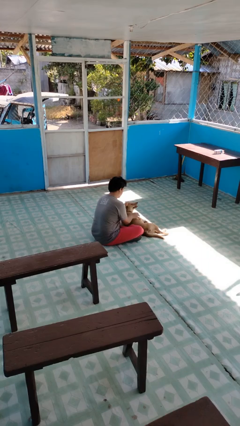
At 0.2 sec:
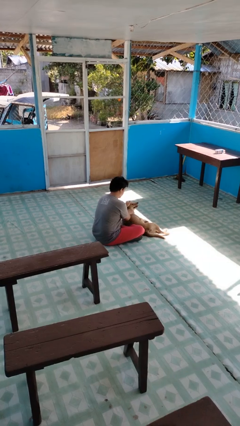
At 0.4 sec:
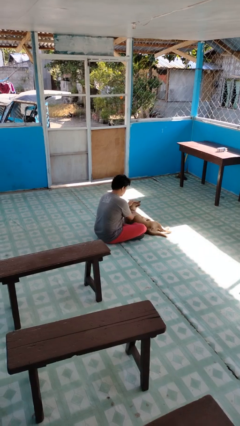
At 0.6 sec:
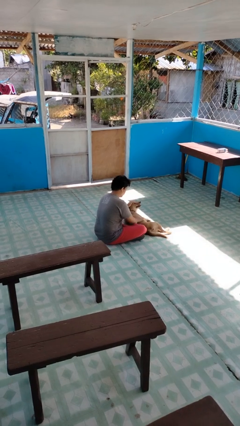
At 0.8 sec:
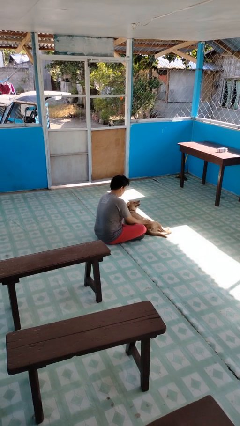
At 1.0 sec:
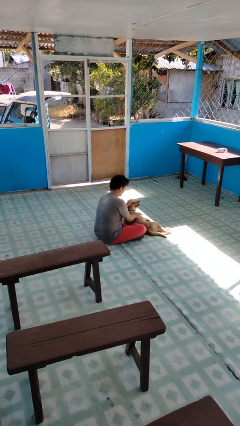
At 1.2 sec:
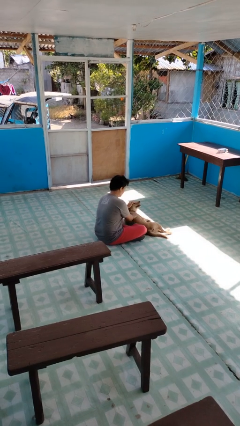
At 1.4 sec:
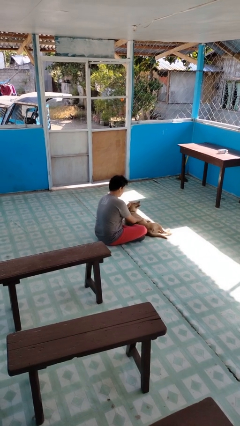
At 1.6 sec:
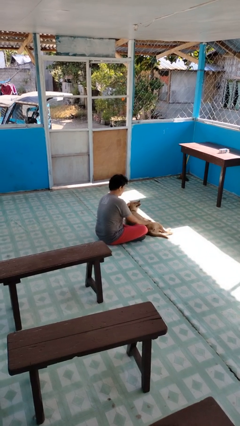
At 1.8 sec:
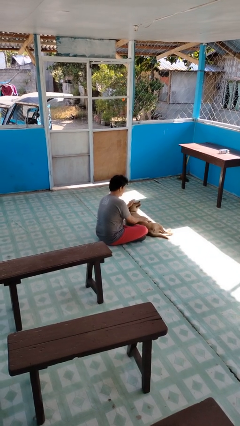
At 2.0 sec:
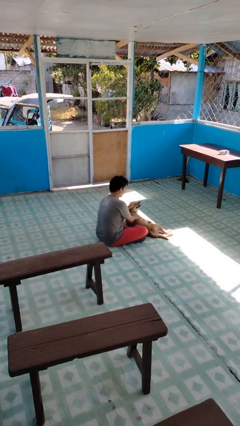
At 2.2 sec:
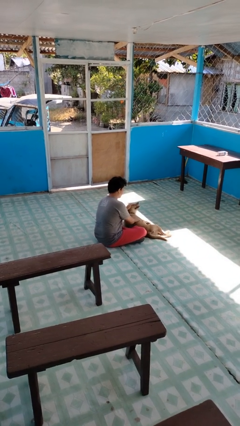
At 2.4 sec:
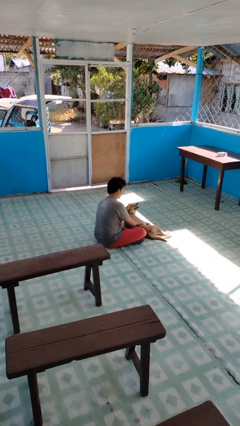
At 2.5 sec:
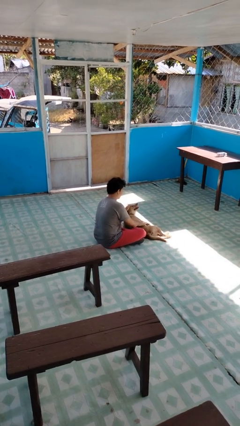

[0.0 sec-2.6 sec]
person pets dog

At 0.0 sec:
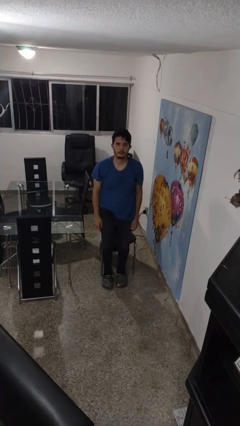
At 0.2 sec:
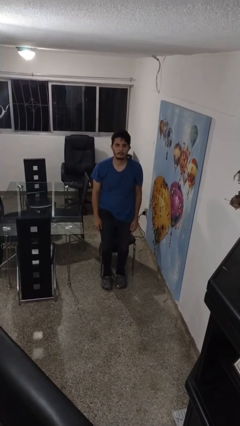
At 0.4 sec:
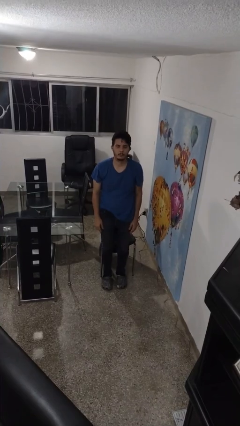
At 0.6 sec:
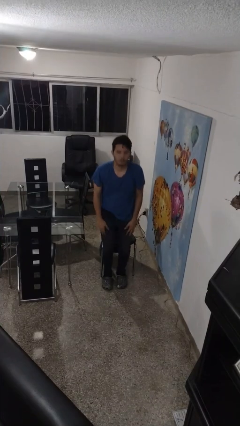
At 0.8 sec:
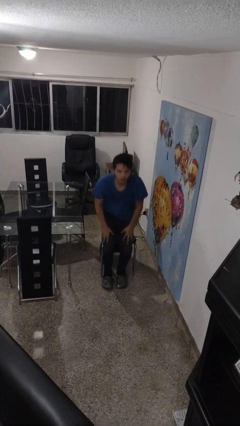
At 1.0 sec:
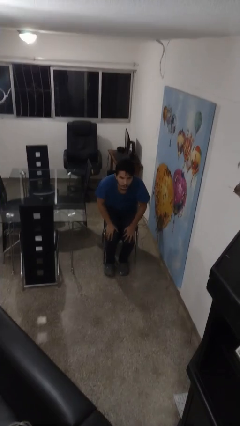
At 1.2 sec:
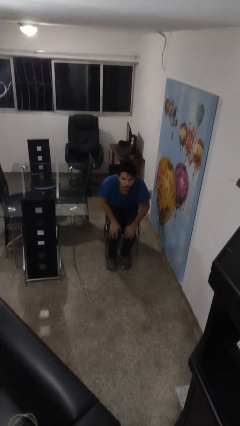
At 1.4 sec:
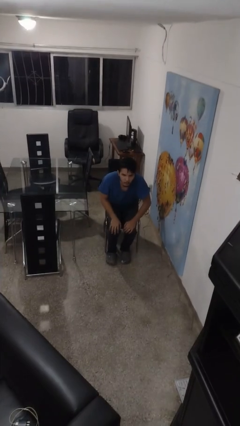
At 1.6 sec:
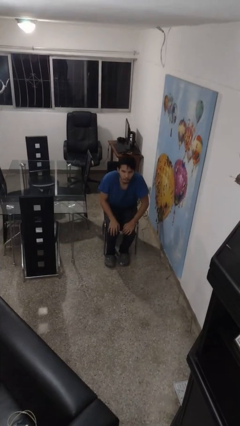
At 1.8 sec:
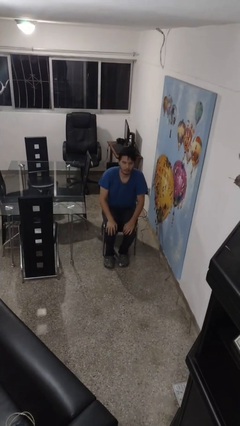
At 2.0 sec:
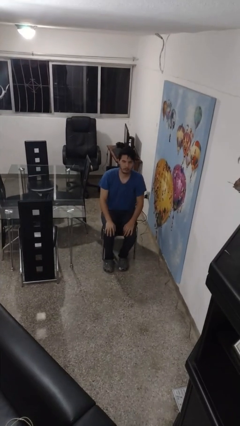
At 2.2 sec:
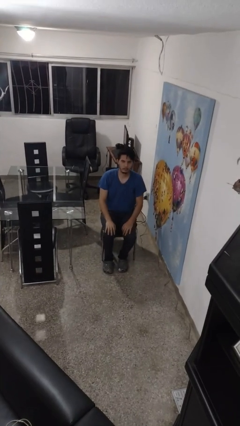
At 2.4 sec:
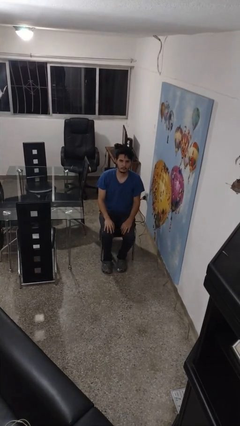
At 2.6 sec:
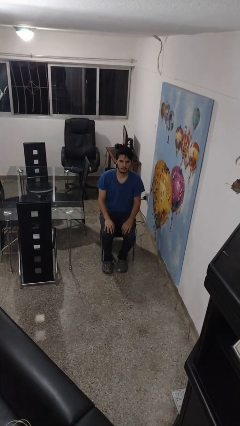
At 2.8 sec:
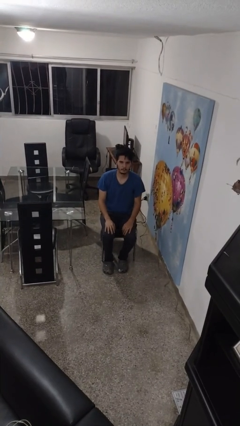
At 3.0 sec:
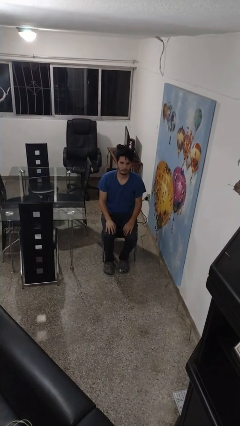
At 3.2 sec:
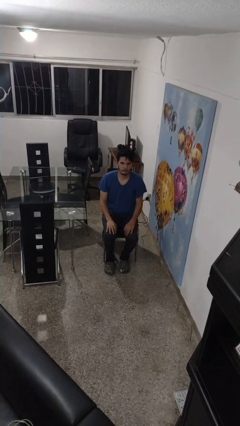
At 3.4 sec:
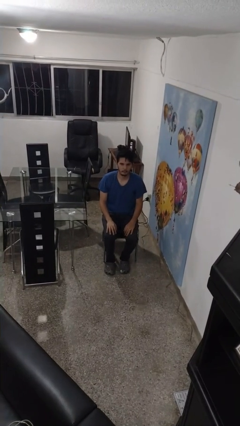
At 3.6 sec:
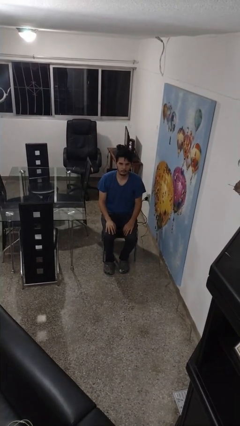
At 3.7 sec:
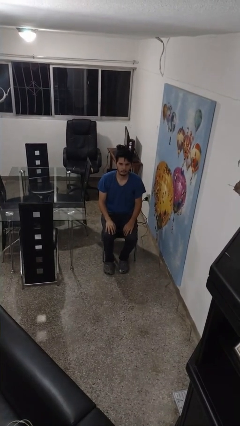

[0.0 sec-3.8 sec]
person sits down

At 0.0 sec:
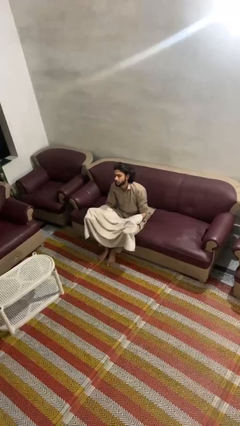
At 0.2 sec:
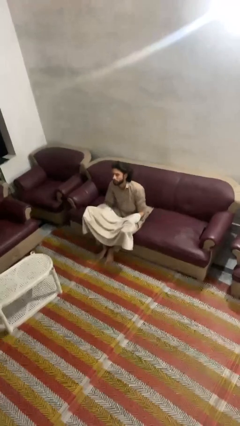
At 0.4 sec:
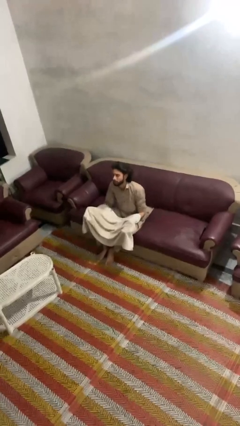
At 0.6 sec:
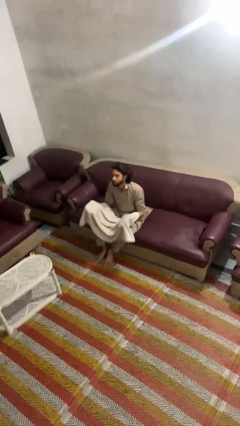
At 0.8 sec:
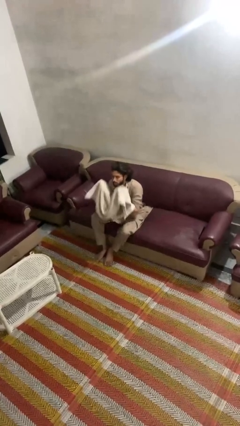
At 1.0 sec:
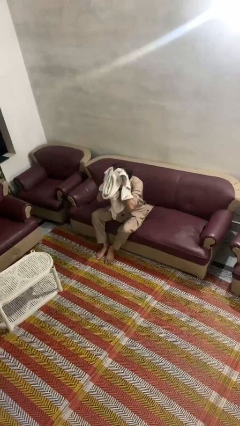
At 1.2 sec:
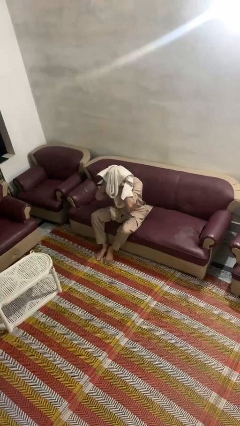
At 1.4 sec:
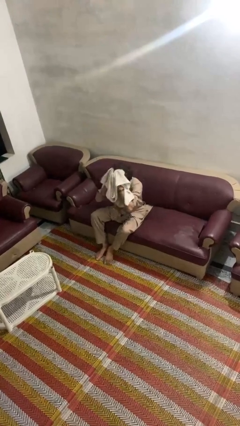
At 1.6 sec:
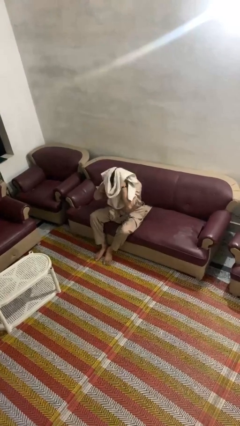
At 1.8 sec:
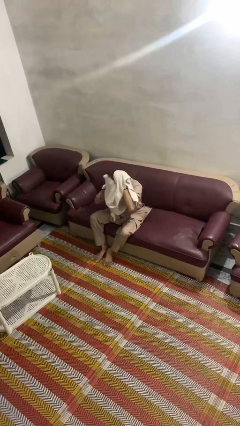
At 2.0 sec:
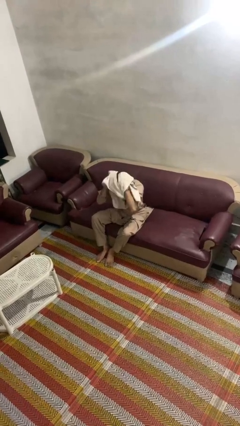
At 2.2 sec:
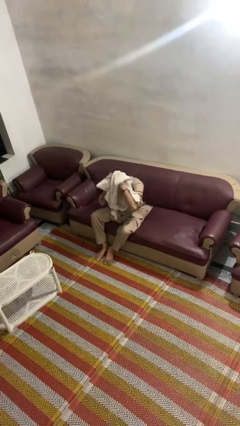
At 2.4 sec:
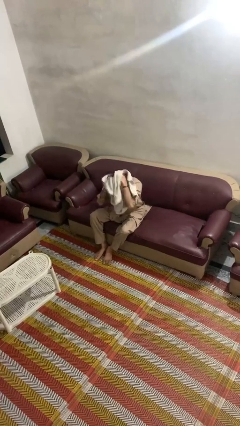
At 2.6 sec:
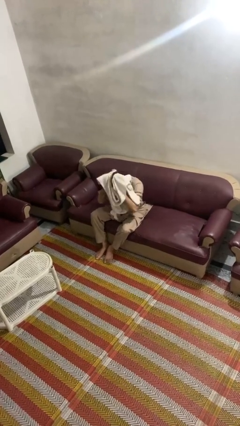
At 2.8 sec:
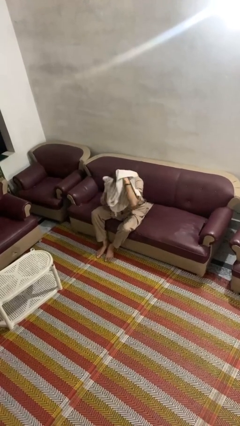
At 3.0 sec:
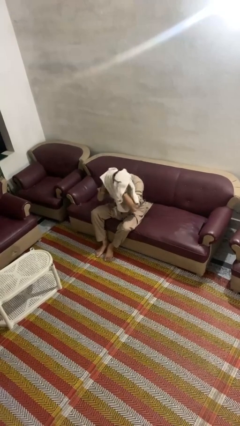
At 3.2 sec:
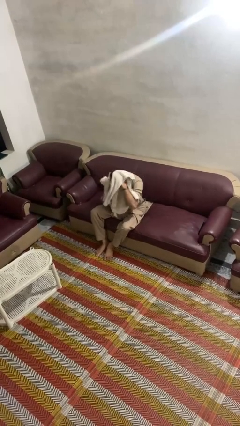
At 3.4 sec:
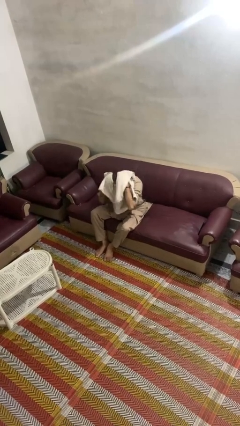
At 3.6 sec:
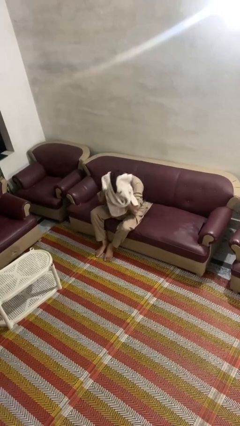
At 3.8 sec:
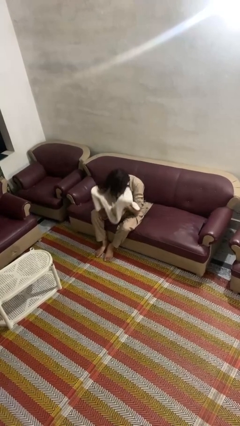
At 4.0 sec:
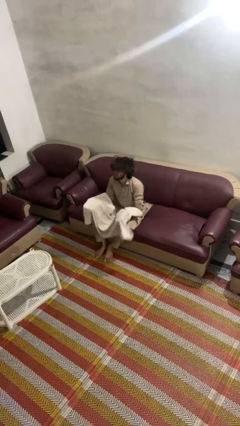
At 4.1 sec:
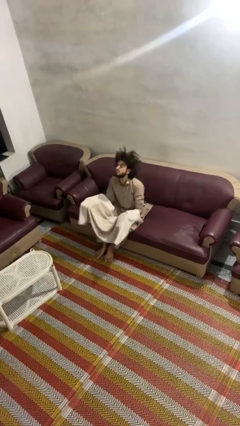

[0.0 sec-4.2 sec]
person dries hair with towel

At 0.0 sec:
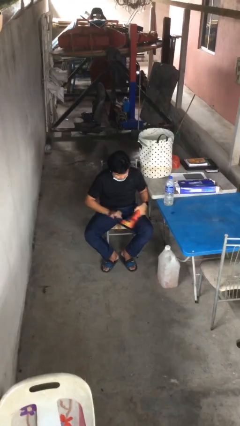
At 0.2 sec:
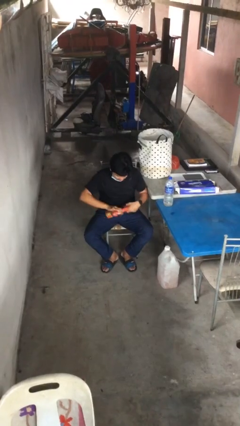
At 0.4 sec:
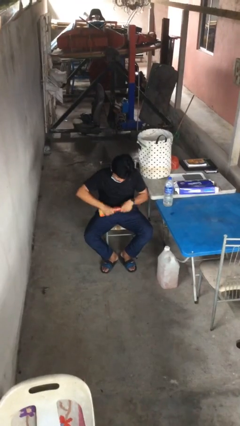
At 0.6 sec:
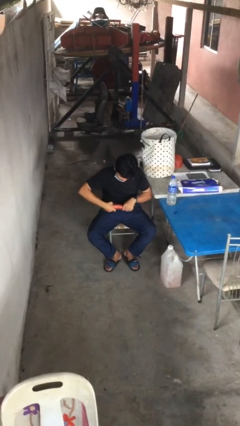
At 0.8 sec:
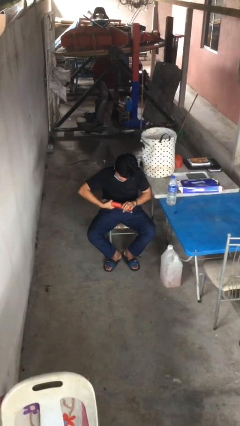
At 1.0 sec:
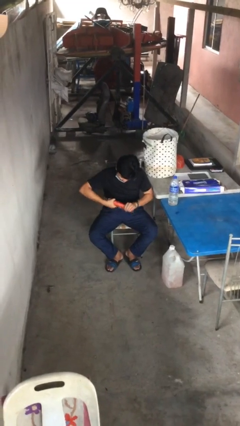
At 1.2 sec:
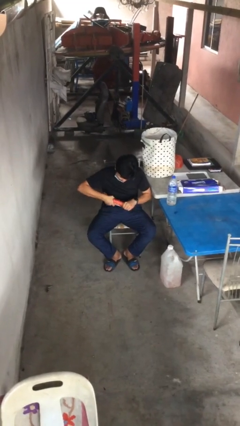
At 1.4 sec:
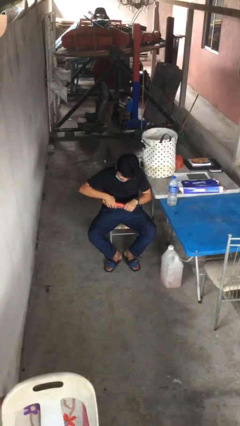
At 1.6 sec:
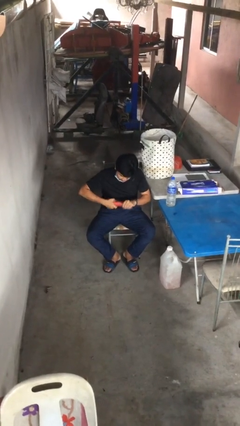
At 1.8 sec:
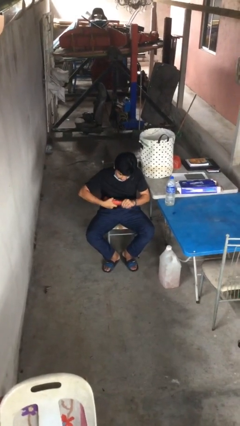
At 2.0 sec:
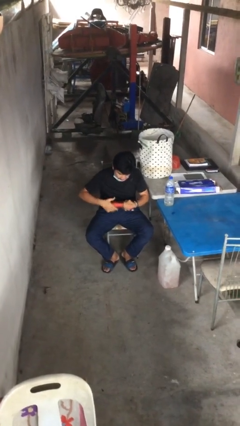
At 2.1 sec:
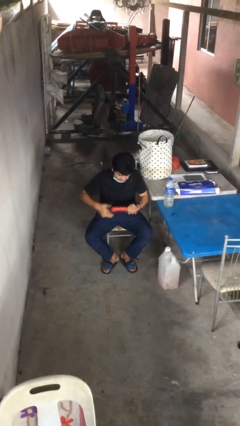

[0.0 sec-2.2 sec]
person squeezes object

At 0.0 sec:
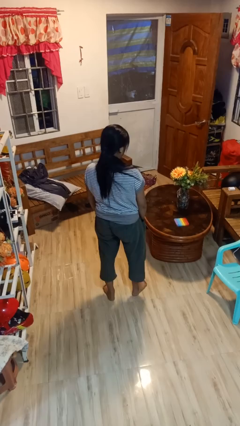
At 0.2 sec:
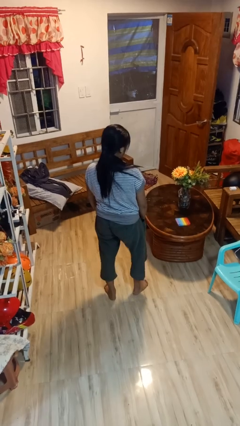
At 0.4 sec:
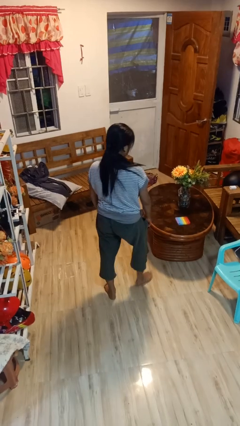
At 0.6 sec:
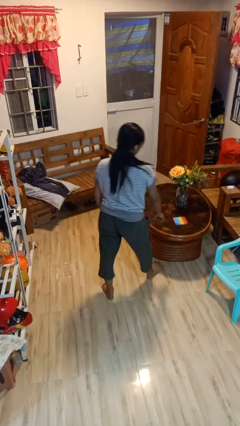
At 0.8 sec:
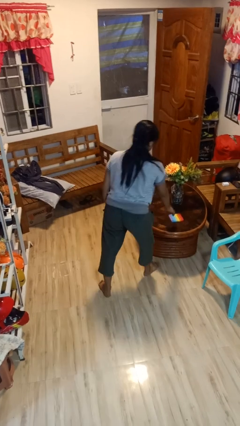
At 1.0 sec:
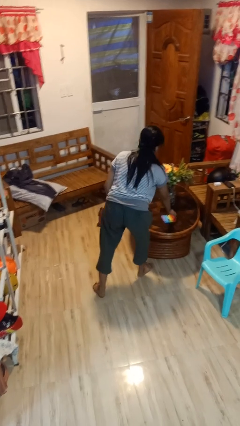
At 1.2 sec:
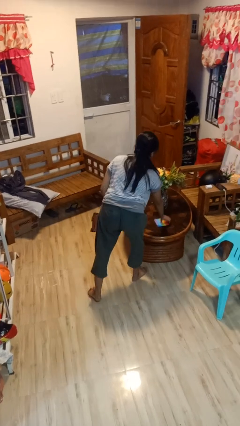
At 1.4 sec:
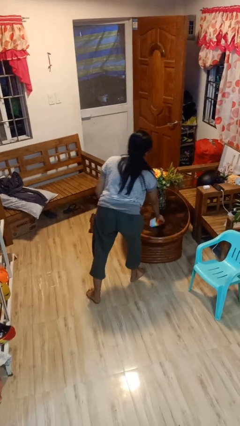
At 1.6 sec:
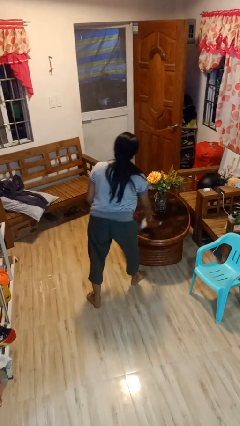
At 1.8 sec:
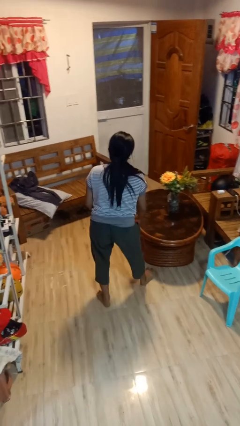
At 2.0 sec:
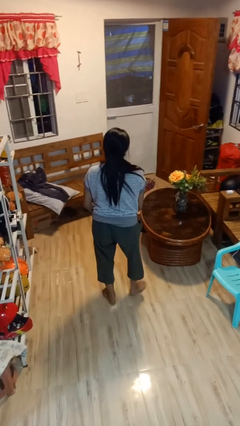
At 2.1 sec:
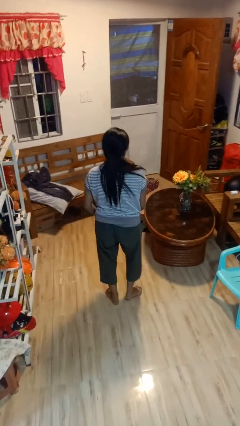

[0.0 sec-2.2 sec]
person picks up object from table

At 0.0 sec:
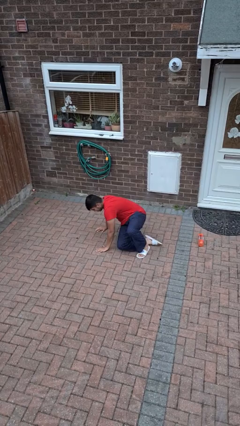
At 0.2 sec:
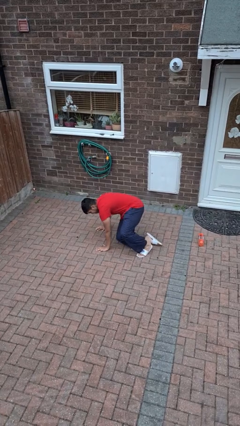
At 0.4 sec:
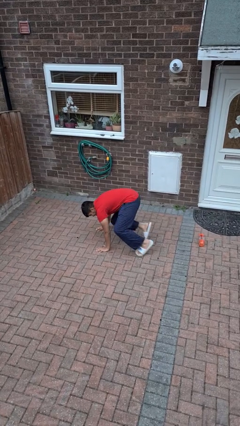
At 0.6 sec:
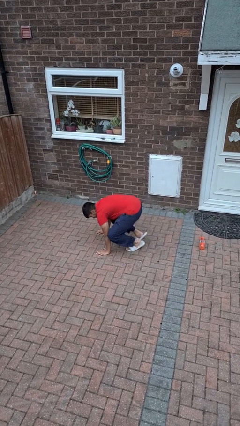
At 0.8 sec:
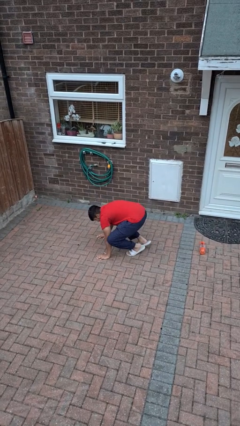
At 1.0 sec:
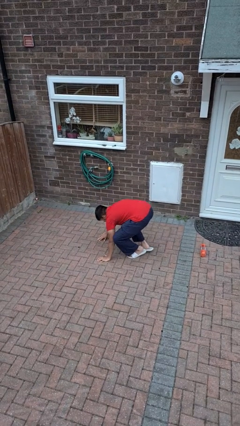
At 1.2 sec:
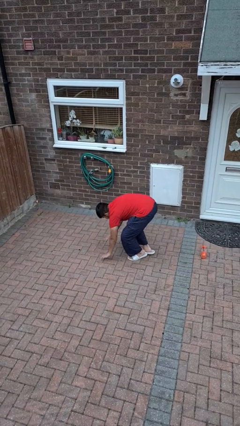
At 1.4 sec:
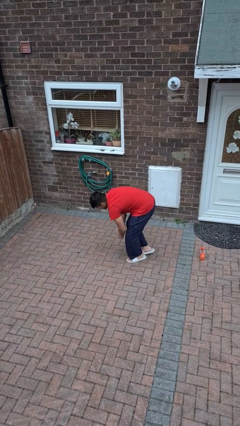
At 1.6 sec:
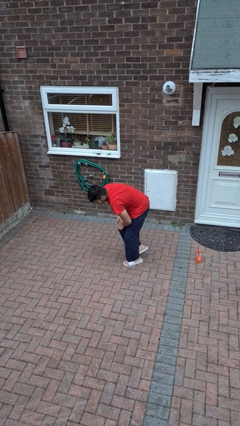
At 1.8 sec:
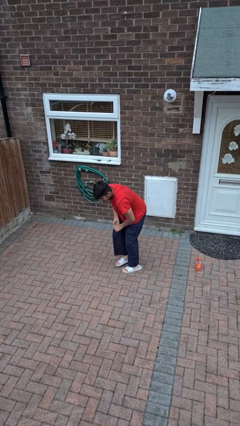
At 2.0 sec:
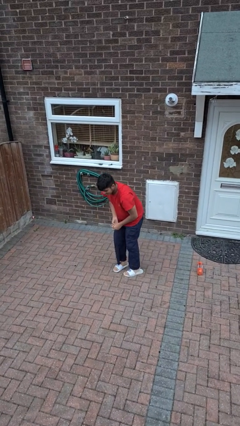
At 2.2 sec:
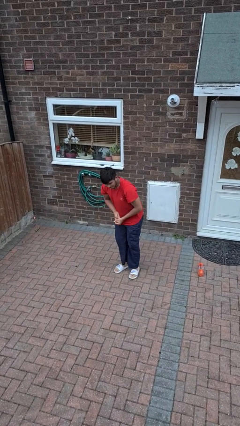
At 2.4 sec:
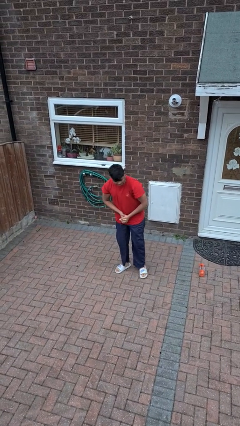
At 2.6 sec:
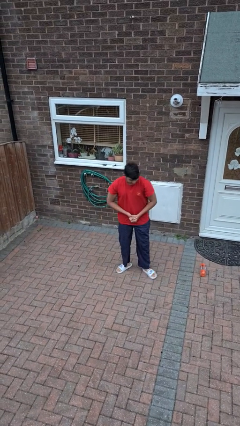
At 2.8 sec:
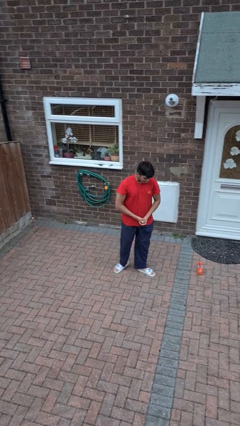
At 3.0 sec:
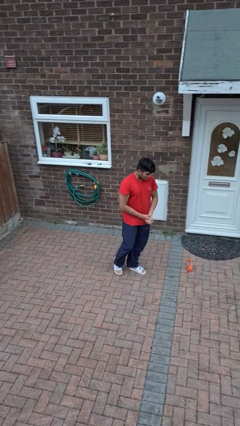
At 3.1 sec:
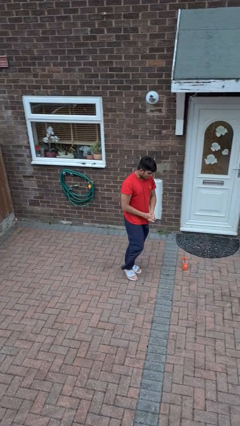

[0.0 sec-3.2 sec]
person stands up from floor
